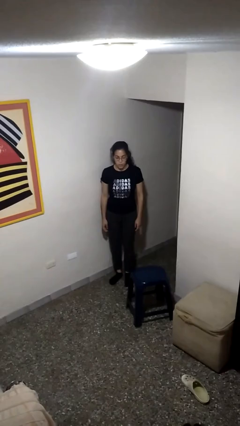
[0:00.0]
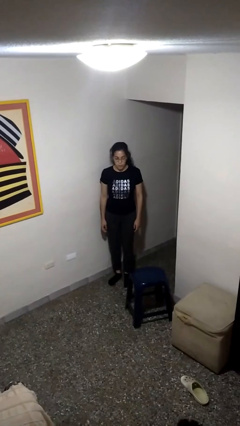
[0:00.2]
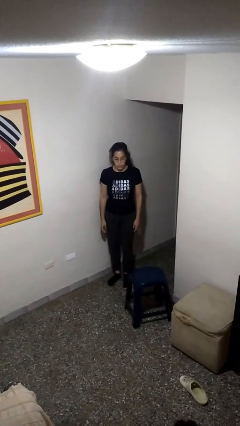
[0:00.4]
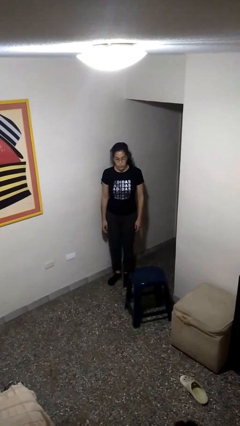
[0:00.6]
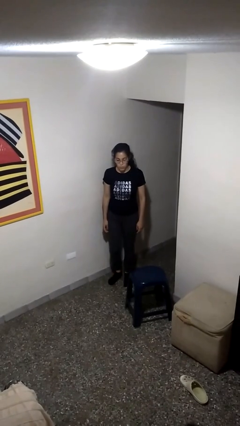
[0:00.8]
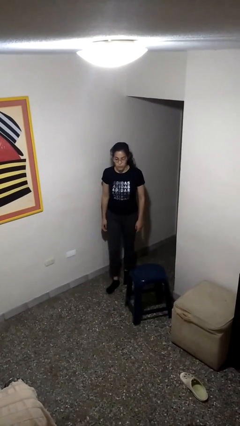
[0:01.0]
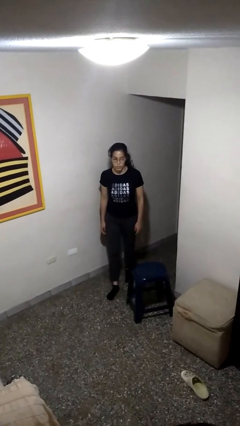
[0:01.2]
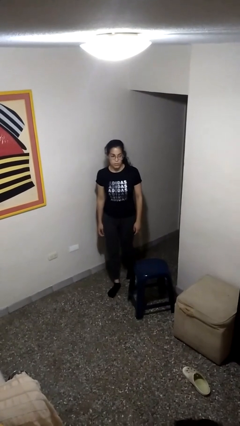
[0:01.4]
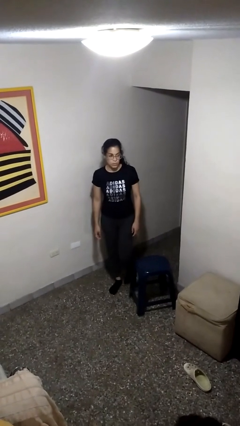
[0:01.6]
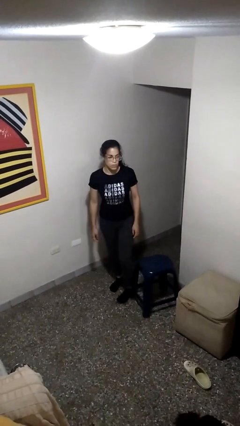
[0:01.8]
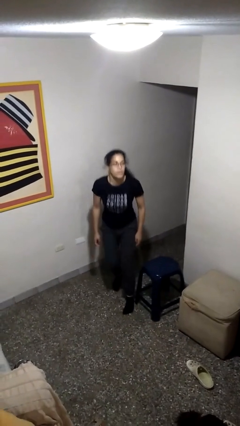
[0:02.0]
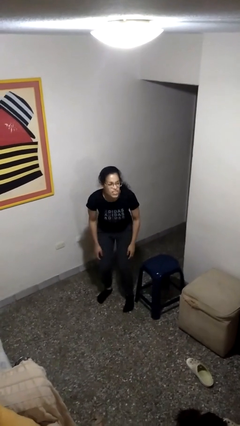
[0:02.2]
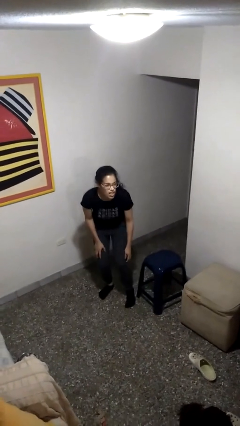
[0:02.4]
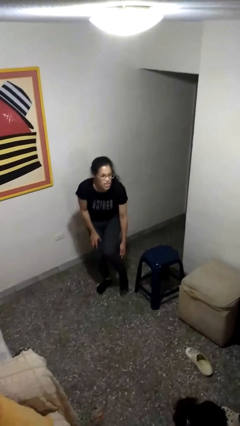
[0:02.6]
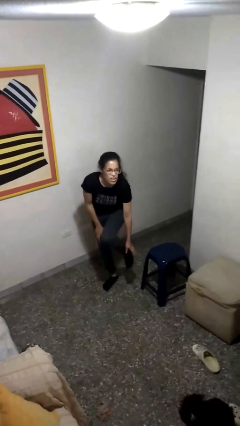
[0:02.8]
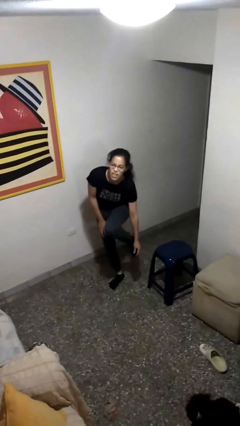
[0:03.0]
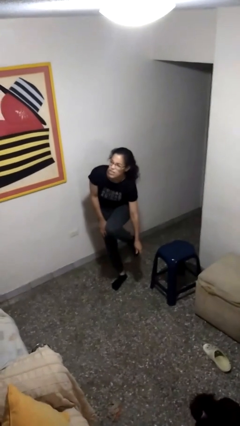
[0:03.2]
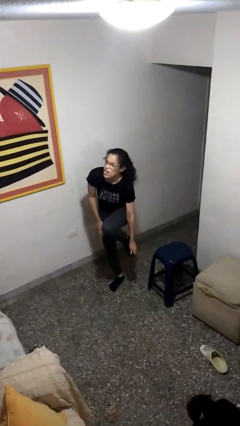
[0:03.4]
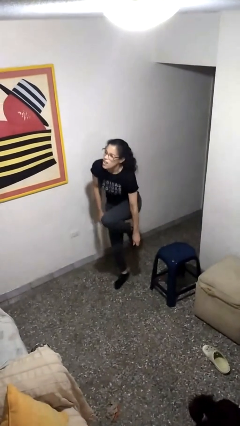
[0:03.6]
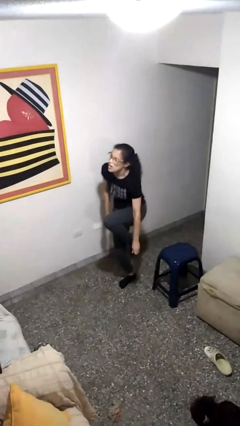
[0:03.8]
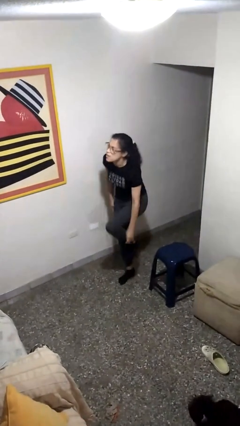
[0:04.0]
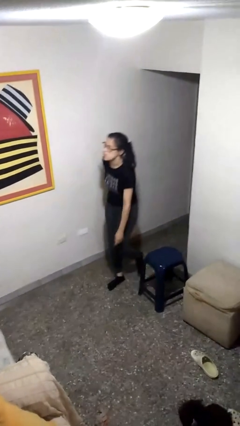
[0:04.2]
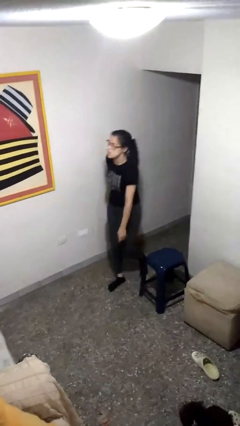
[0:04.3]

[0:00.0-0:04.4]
person stubs toe

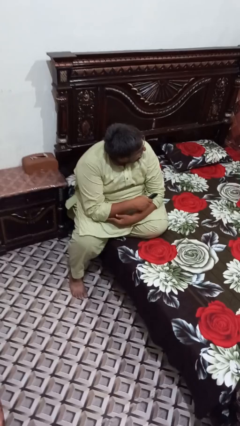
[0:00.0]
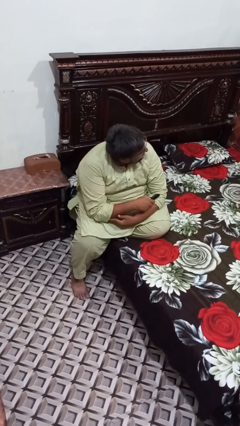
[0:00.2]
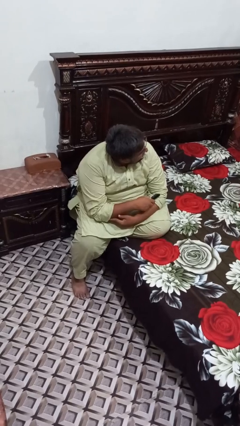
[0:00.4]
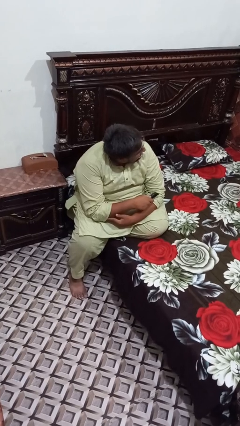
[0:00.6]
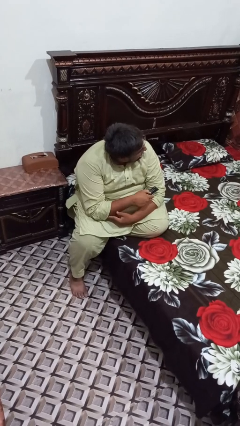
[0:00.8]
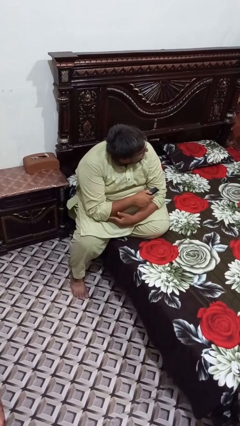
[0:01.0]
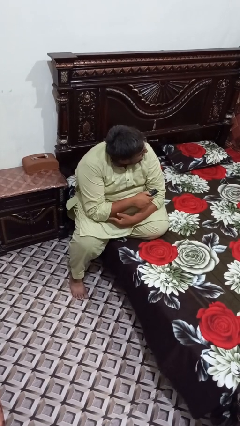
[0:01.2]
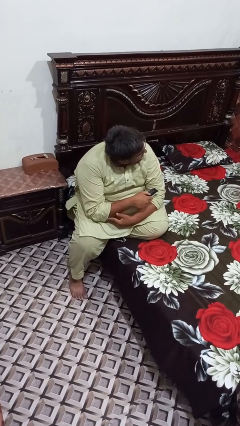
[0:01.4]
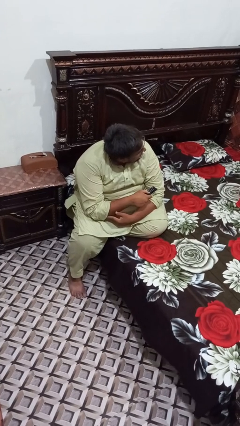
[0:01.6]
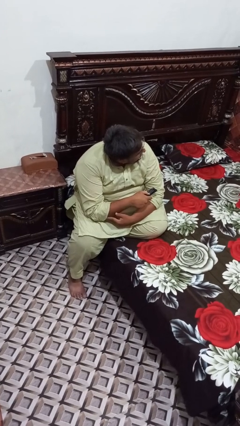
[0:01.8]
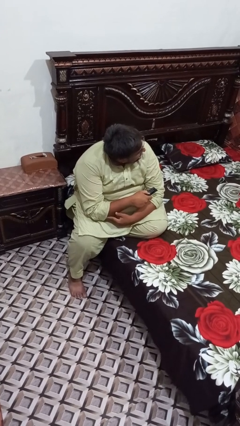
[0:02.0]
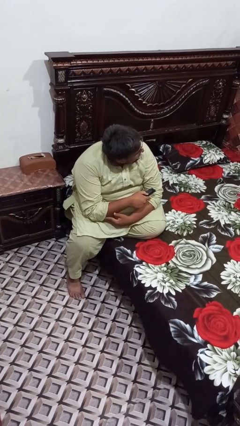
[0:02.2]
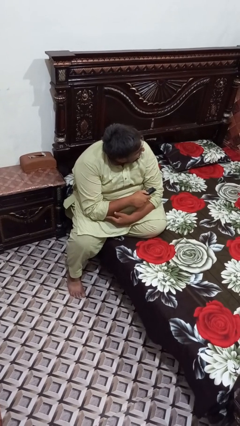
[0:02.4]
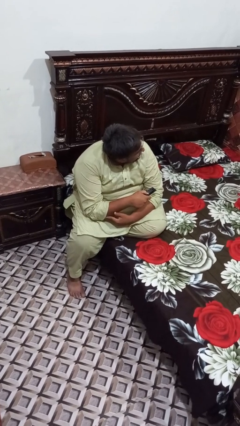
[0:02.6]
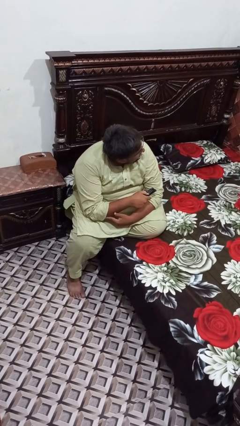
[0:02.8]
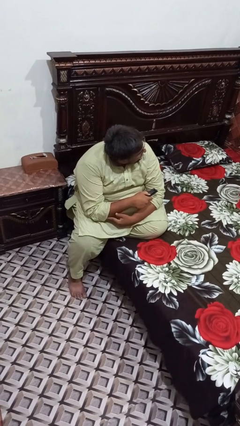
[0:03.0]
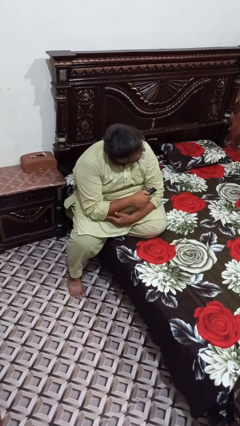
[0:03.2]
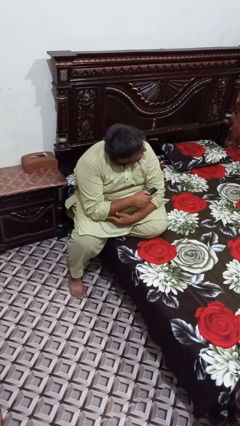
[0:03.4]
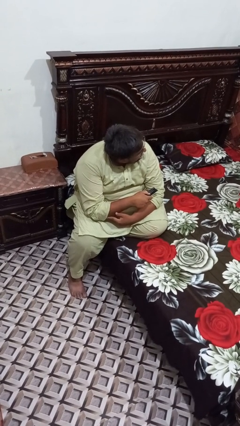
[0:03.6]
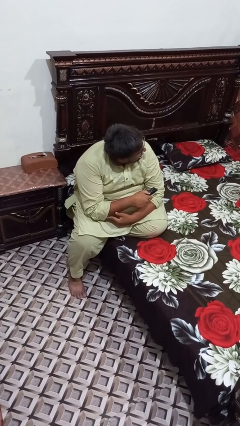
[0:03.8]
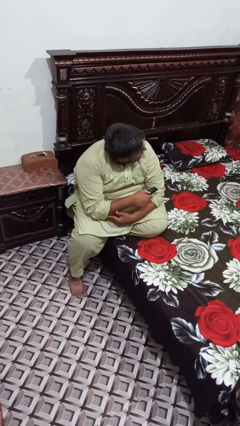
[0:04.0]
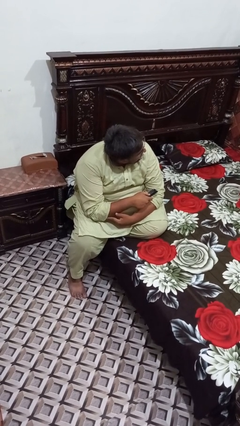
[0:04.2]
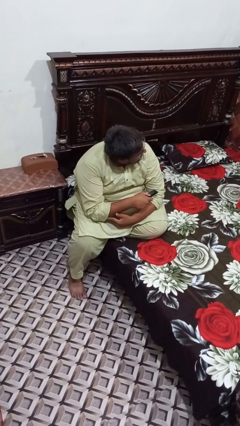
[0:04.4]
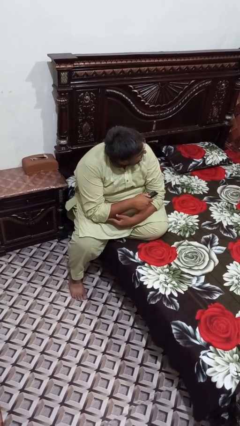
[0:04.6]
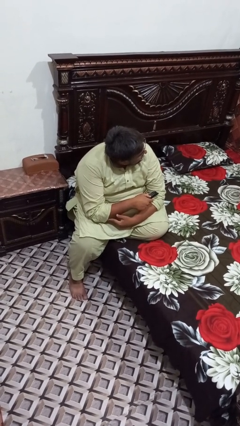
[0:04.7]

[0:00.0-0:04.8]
person uses television remote

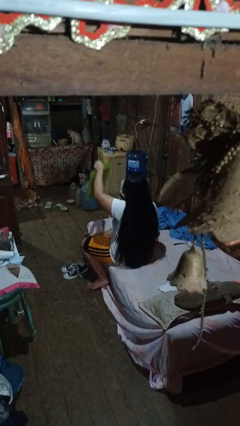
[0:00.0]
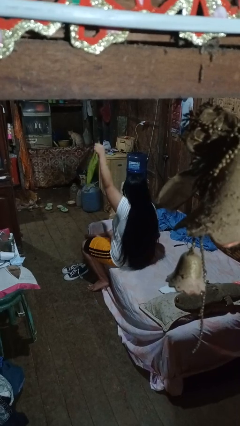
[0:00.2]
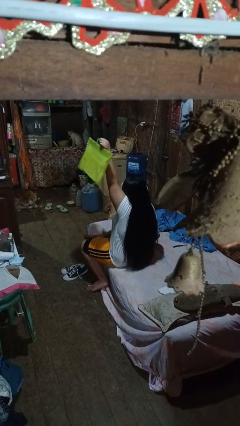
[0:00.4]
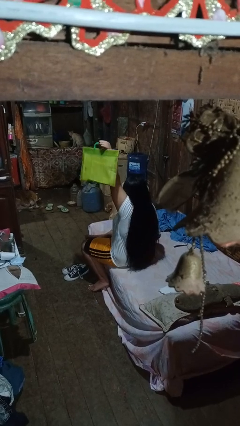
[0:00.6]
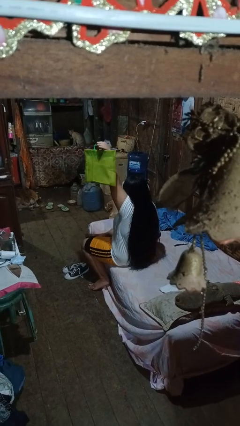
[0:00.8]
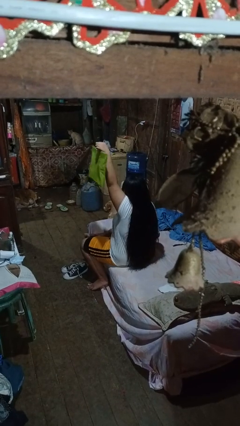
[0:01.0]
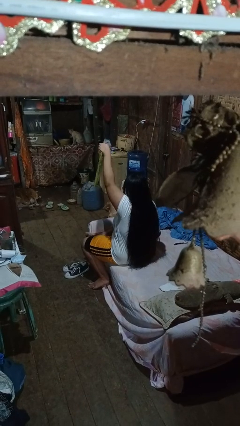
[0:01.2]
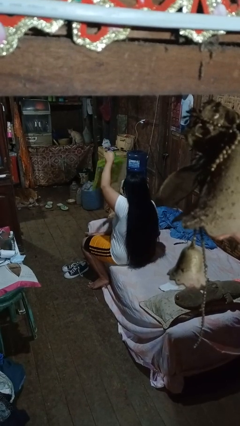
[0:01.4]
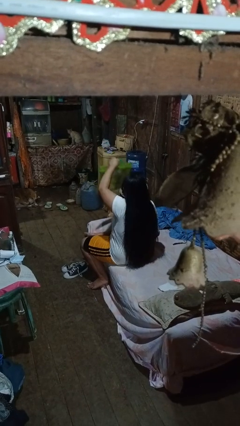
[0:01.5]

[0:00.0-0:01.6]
person holds object above head

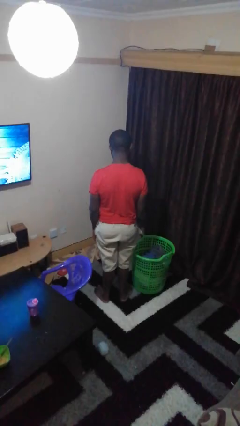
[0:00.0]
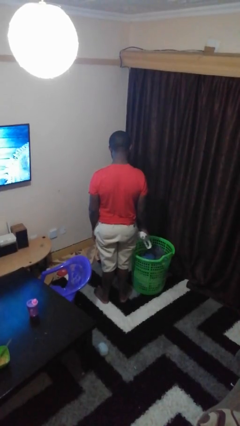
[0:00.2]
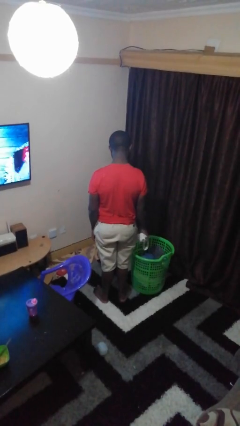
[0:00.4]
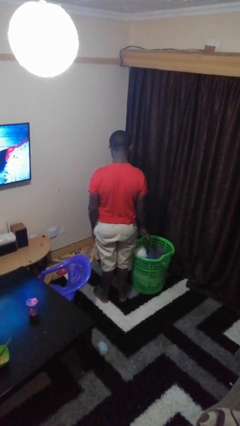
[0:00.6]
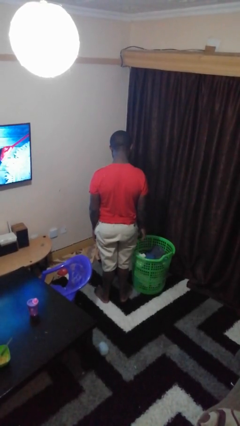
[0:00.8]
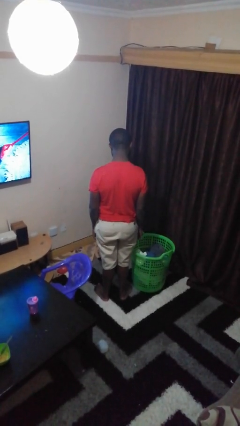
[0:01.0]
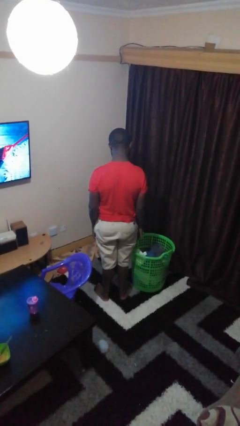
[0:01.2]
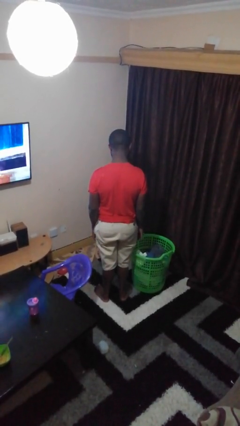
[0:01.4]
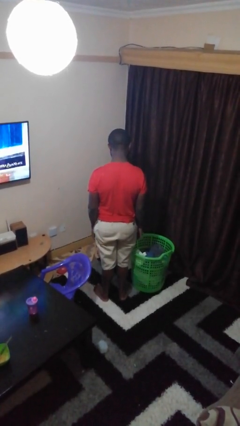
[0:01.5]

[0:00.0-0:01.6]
person puts object into basket

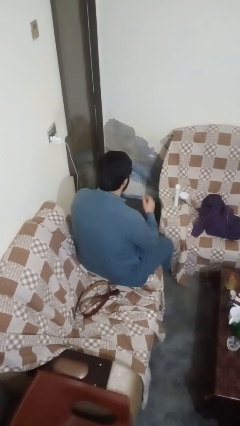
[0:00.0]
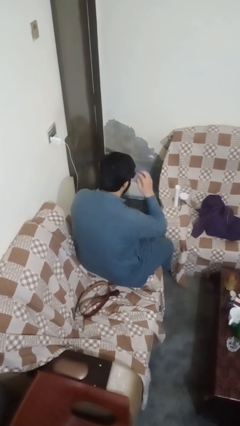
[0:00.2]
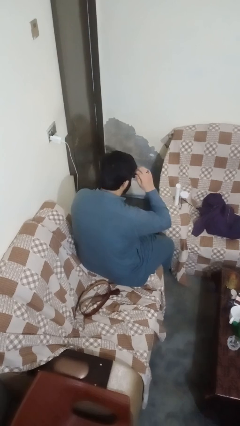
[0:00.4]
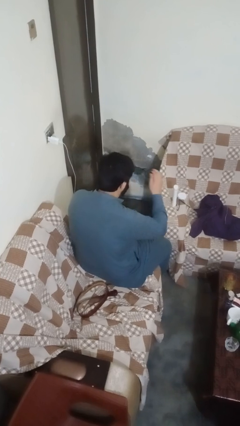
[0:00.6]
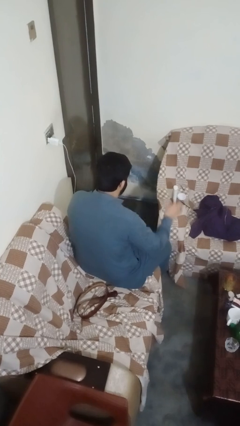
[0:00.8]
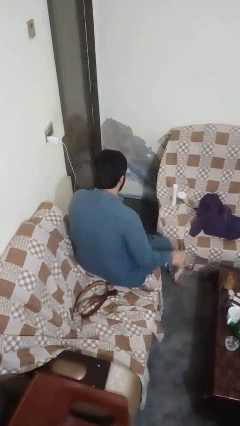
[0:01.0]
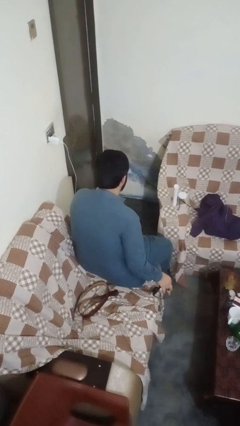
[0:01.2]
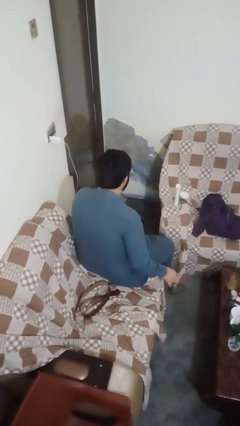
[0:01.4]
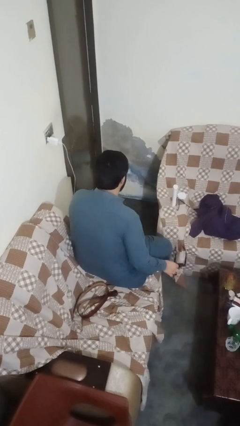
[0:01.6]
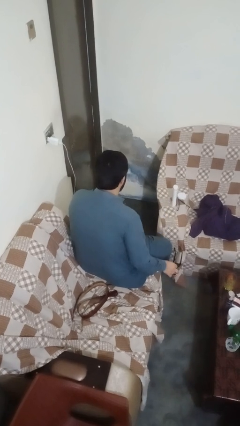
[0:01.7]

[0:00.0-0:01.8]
person takes off sunglasses

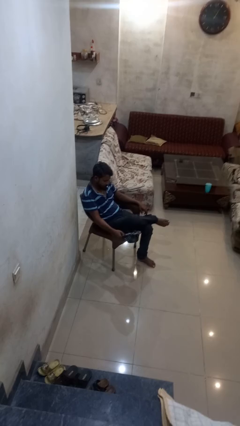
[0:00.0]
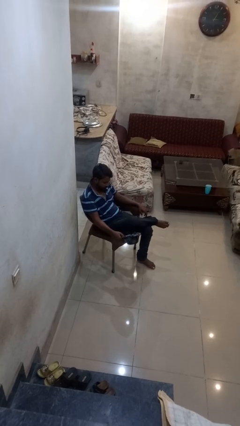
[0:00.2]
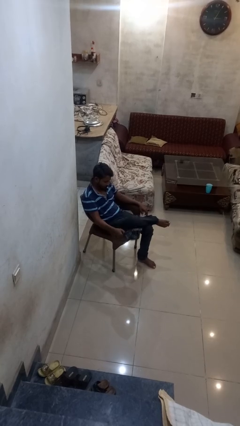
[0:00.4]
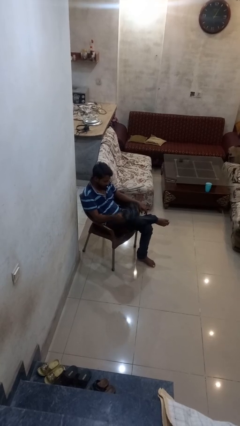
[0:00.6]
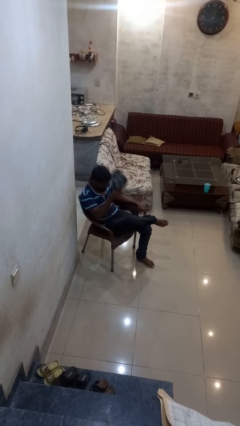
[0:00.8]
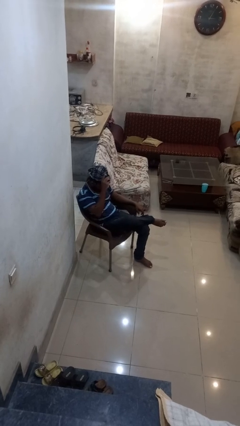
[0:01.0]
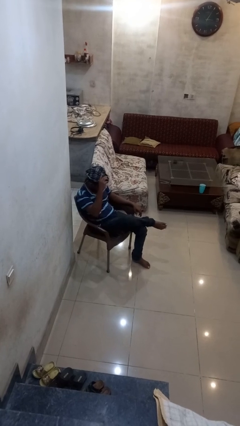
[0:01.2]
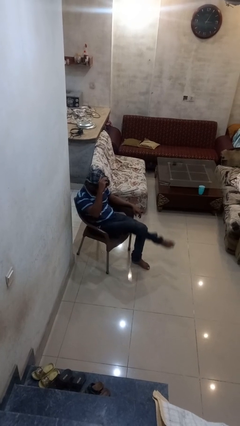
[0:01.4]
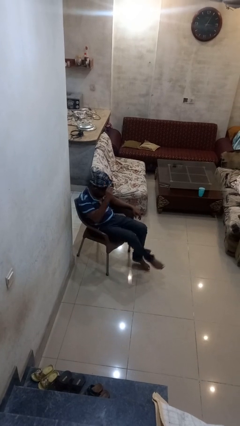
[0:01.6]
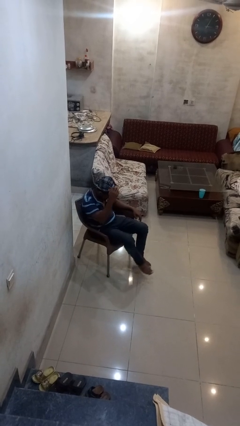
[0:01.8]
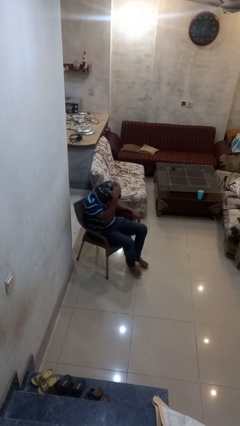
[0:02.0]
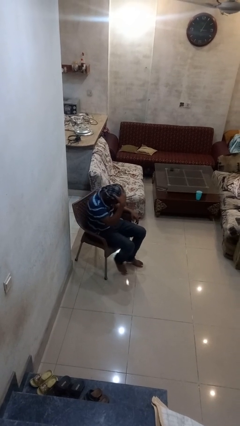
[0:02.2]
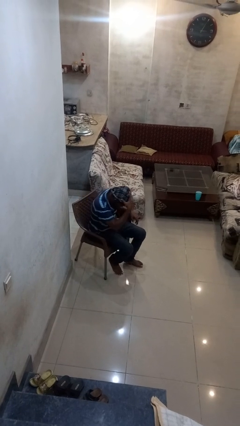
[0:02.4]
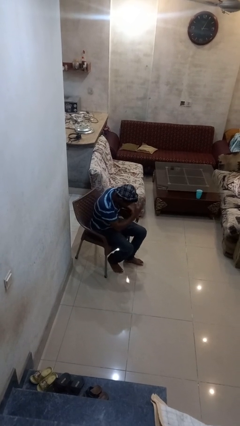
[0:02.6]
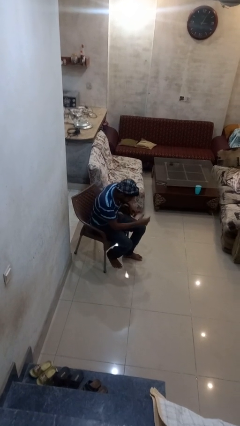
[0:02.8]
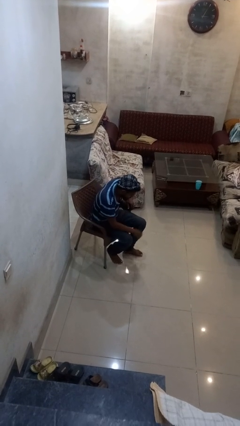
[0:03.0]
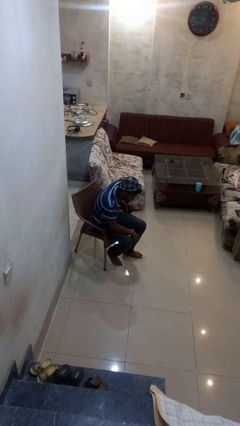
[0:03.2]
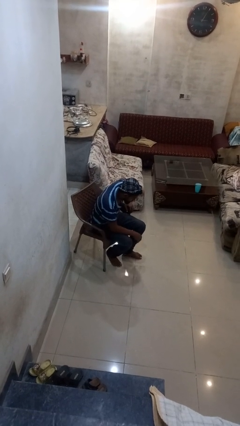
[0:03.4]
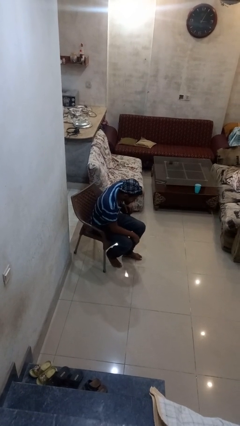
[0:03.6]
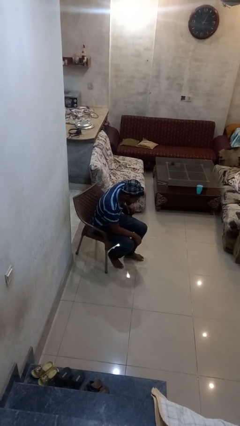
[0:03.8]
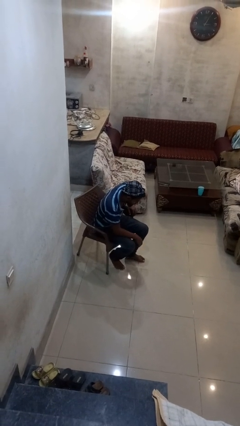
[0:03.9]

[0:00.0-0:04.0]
person puts on hat
